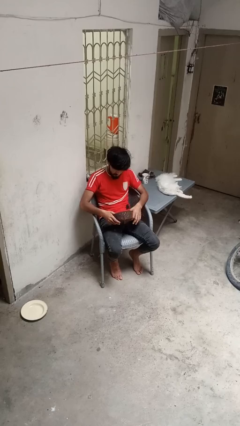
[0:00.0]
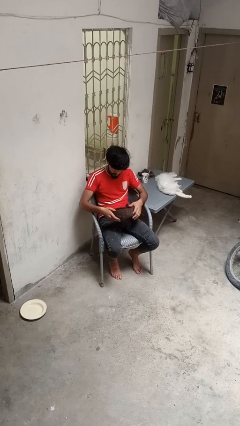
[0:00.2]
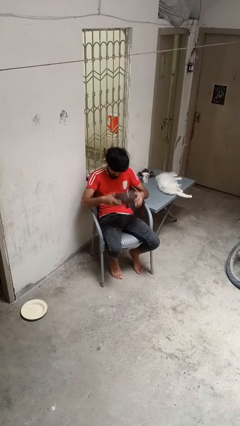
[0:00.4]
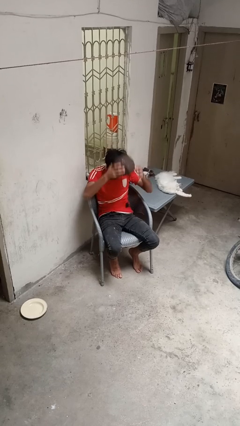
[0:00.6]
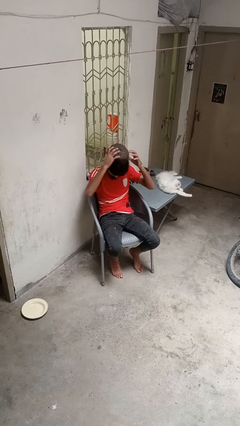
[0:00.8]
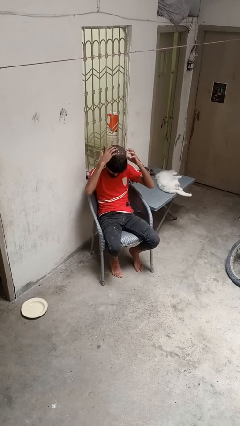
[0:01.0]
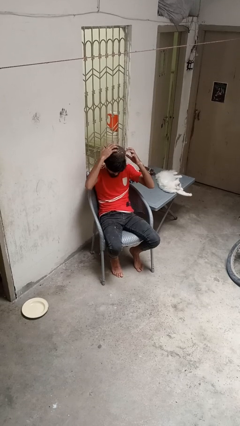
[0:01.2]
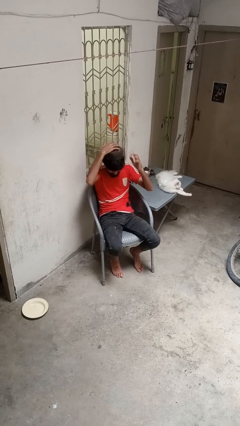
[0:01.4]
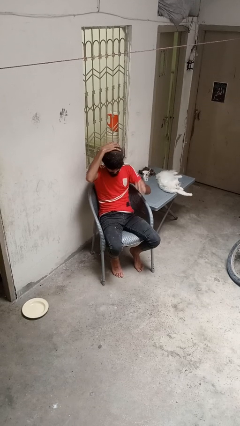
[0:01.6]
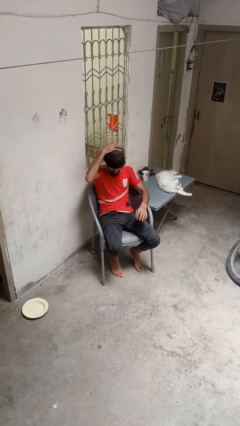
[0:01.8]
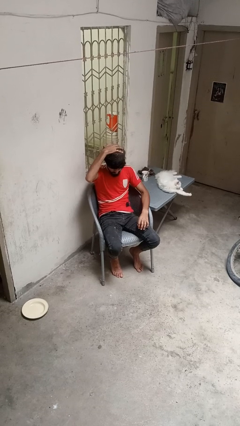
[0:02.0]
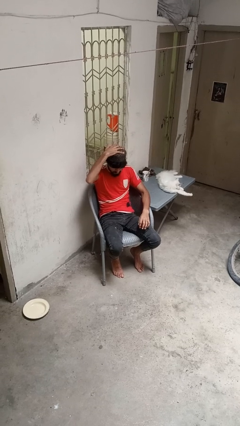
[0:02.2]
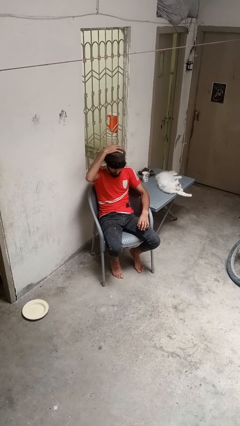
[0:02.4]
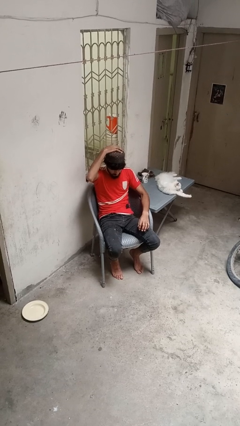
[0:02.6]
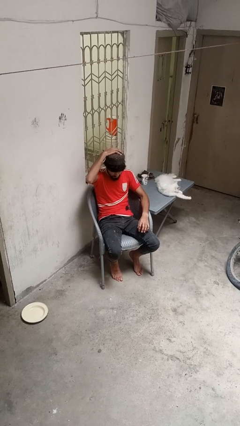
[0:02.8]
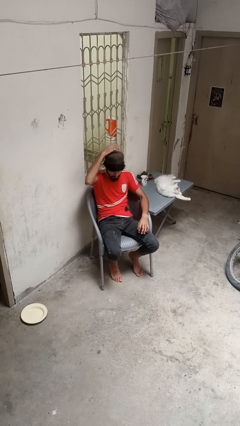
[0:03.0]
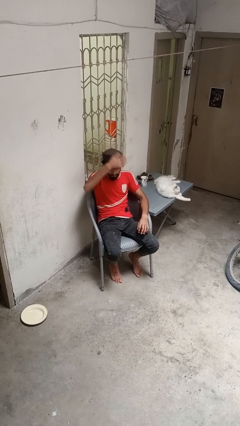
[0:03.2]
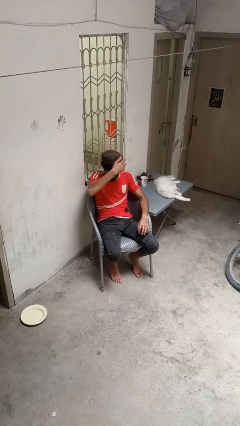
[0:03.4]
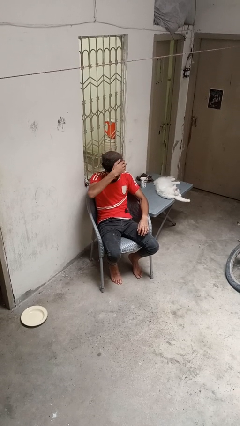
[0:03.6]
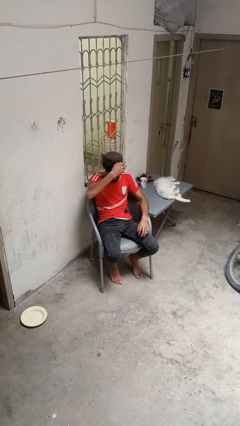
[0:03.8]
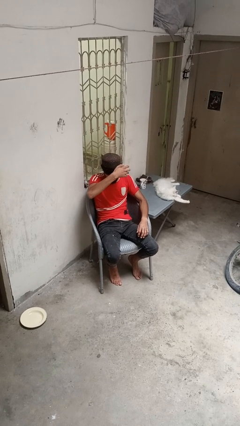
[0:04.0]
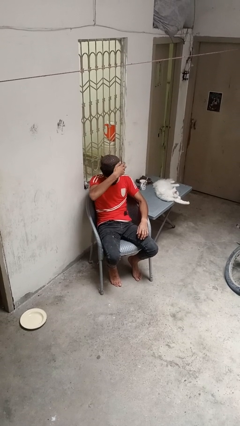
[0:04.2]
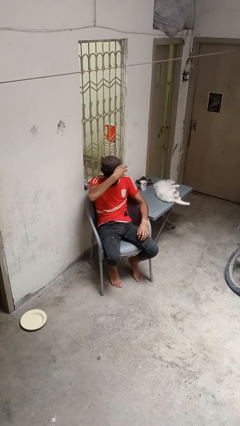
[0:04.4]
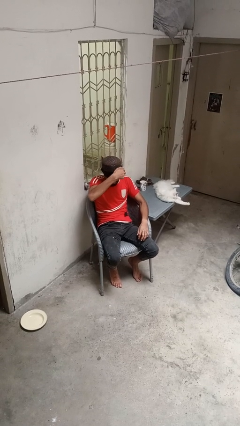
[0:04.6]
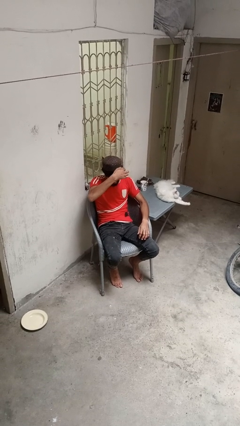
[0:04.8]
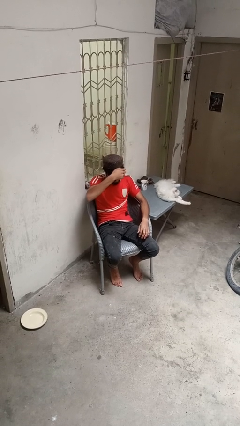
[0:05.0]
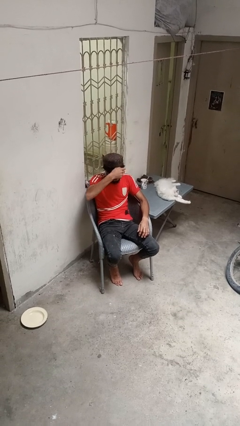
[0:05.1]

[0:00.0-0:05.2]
person puts on hat

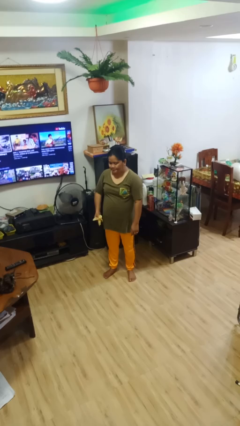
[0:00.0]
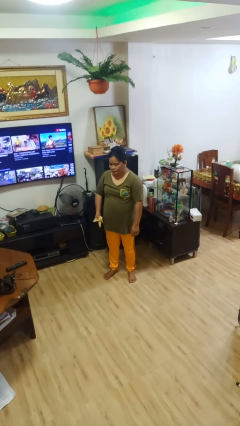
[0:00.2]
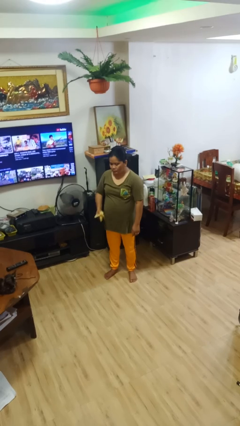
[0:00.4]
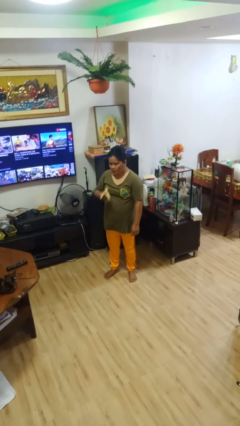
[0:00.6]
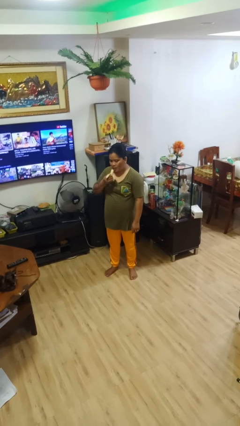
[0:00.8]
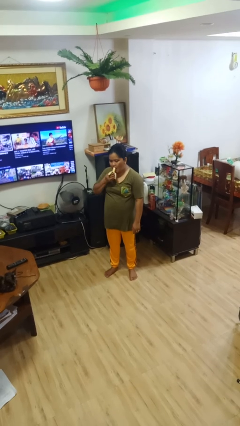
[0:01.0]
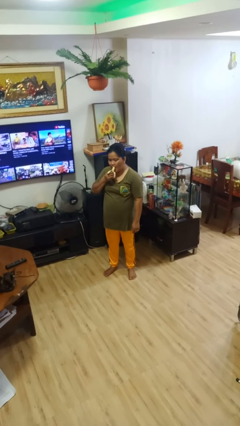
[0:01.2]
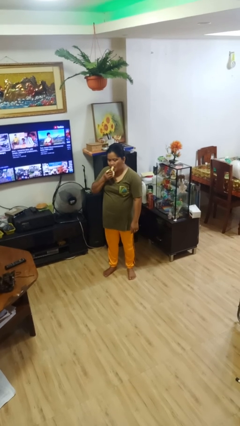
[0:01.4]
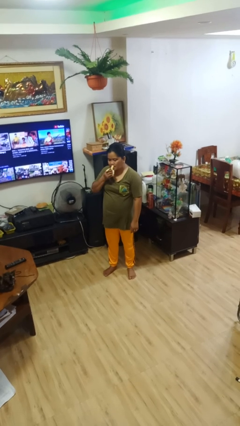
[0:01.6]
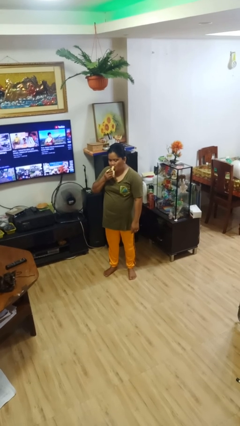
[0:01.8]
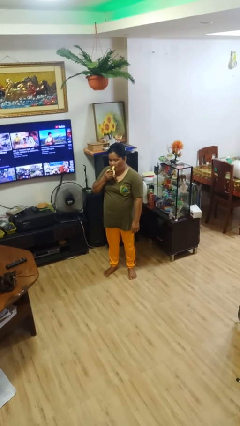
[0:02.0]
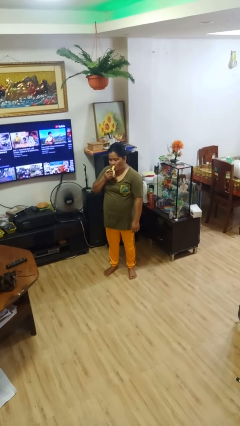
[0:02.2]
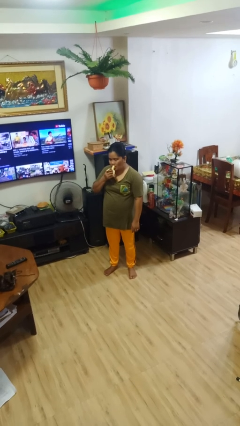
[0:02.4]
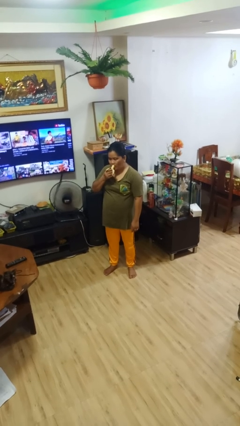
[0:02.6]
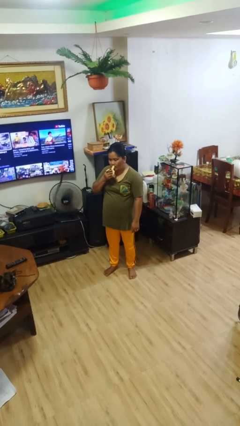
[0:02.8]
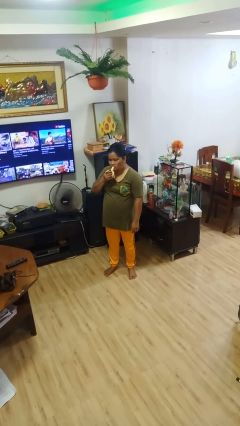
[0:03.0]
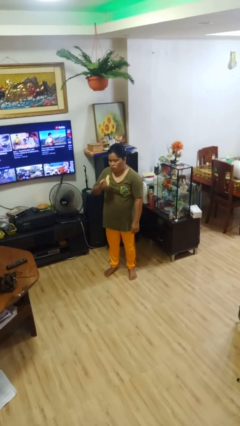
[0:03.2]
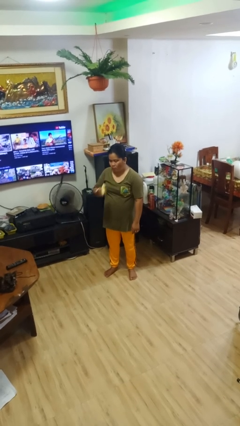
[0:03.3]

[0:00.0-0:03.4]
person eats banana

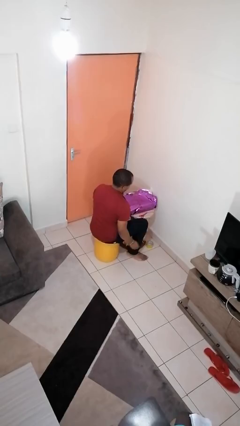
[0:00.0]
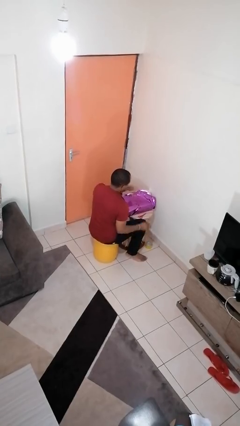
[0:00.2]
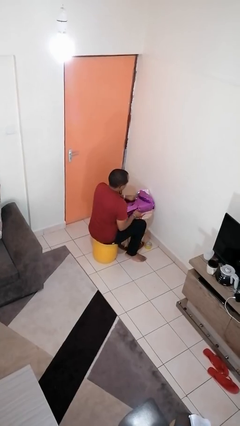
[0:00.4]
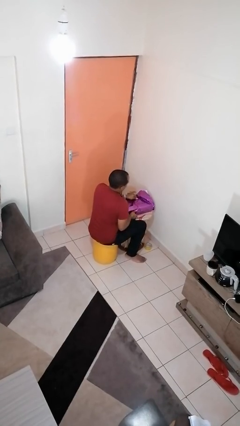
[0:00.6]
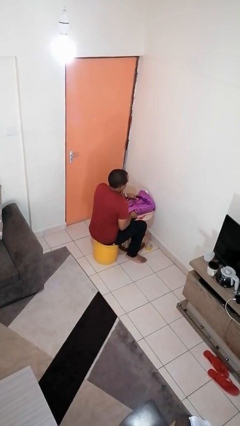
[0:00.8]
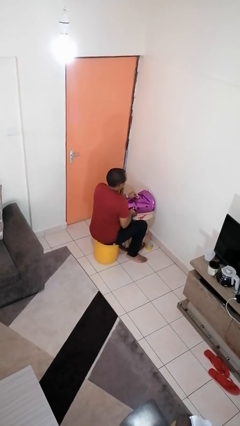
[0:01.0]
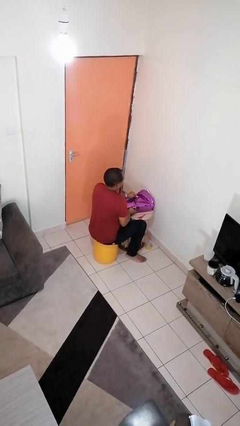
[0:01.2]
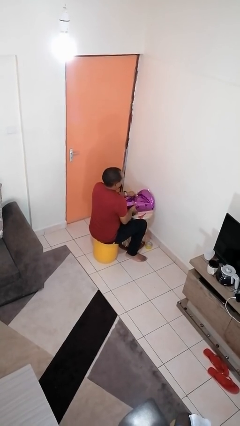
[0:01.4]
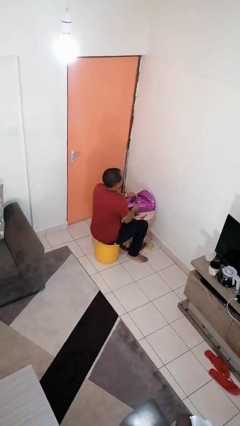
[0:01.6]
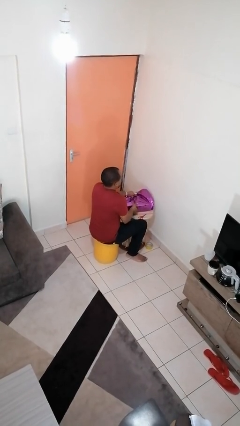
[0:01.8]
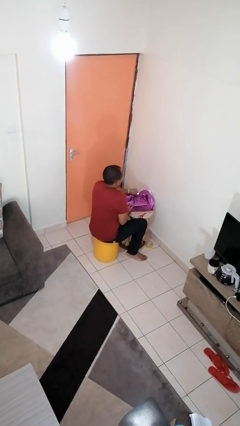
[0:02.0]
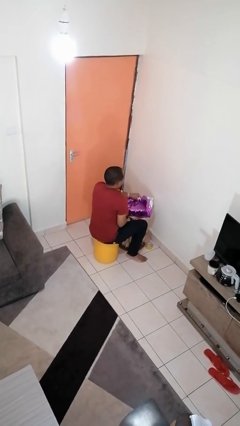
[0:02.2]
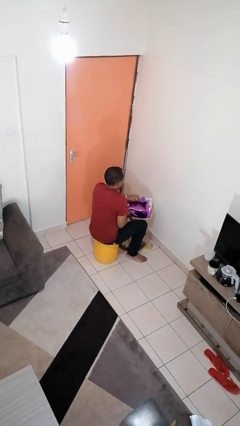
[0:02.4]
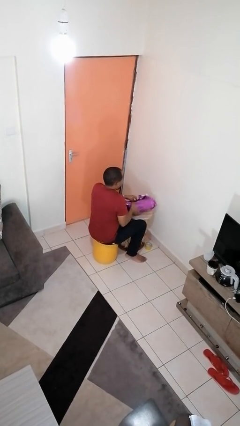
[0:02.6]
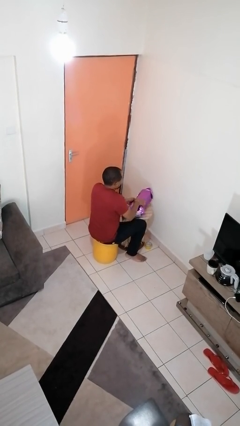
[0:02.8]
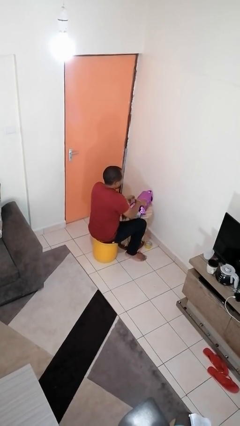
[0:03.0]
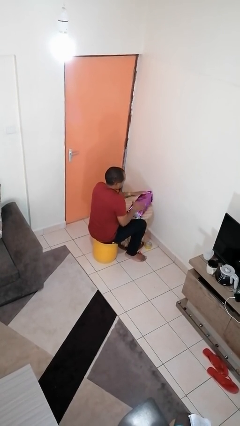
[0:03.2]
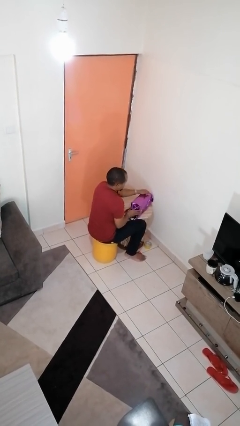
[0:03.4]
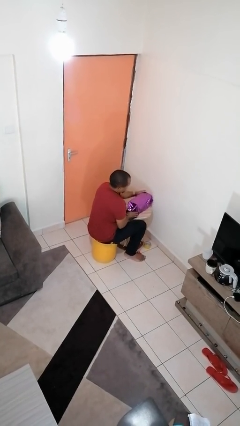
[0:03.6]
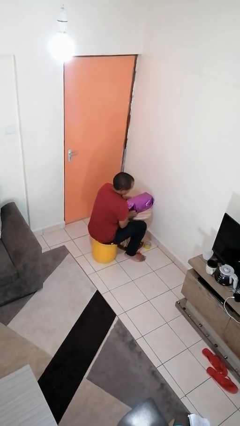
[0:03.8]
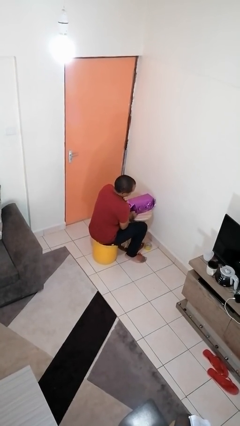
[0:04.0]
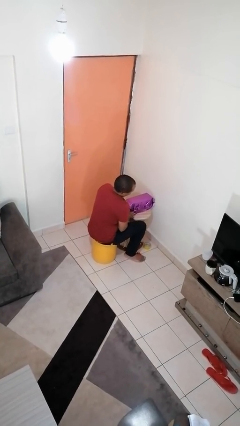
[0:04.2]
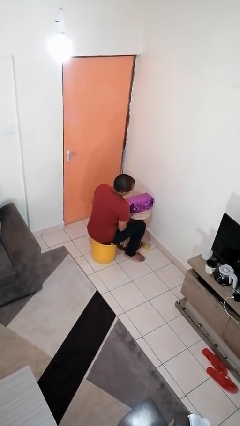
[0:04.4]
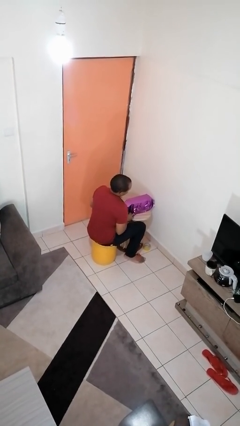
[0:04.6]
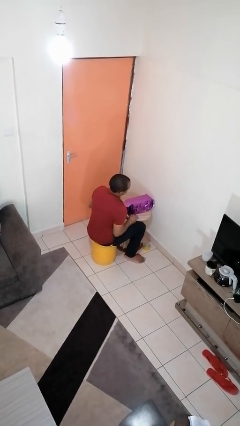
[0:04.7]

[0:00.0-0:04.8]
person wraps box

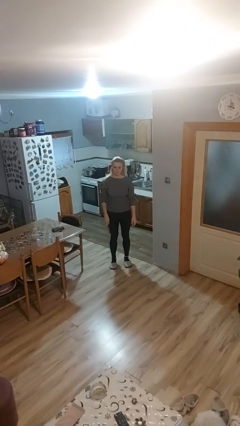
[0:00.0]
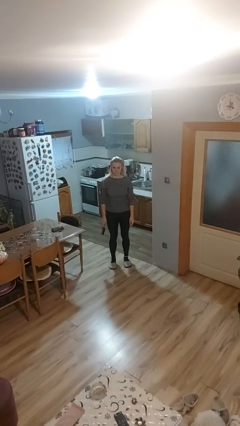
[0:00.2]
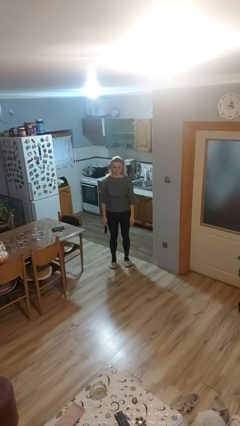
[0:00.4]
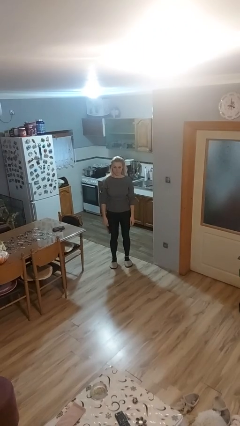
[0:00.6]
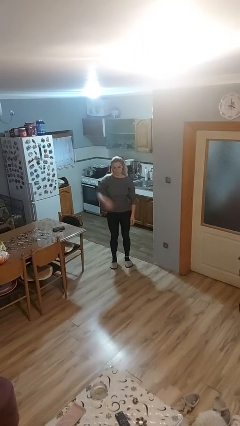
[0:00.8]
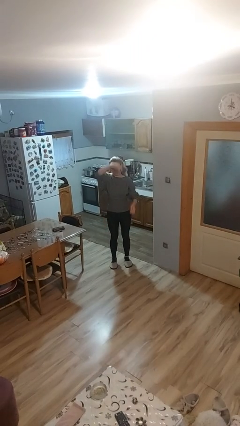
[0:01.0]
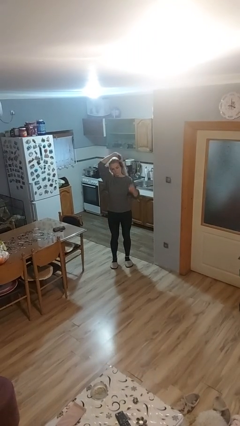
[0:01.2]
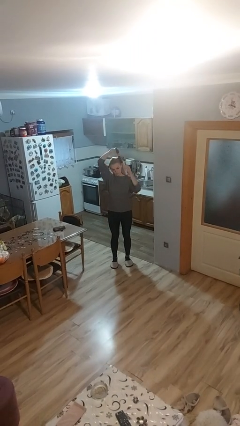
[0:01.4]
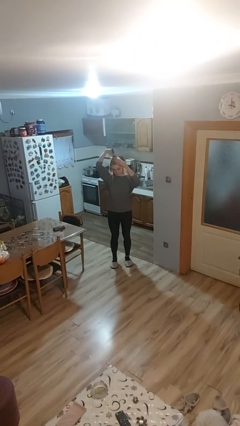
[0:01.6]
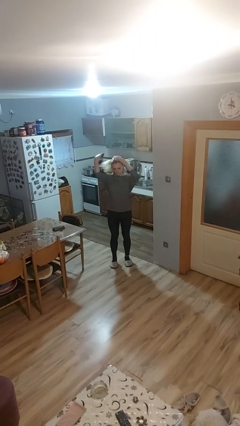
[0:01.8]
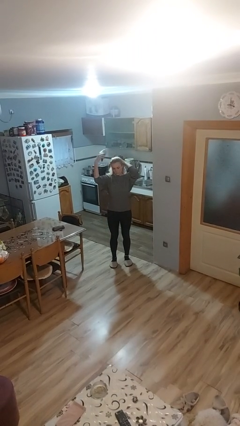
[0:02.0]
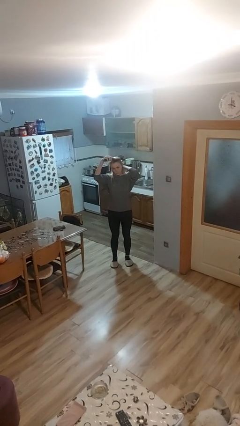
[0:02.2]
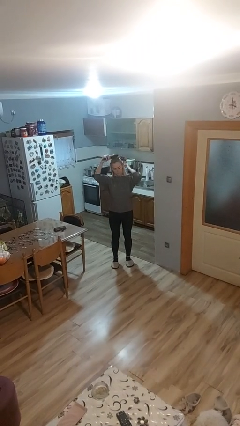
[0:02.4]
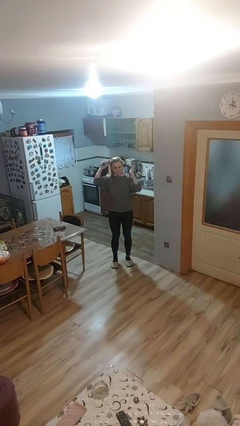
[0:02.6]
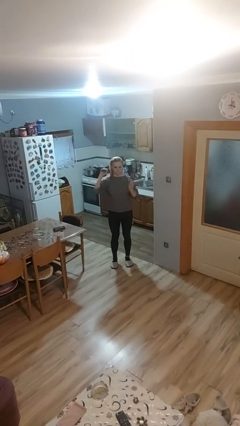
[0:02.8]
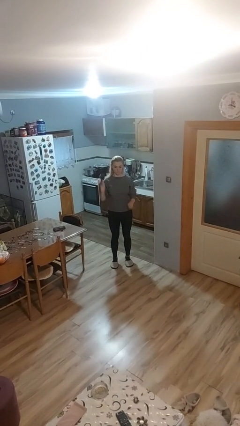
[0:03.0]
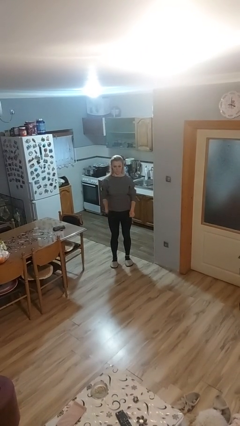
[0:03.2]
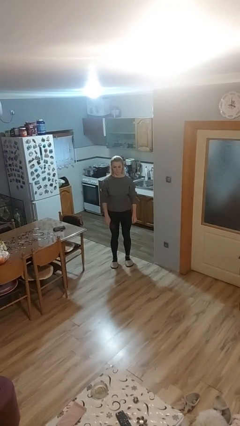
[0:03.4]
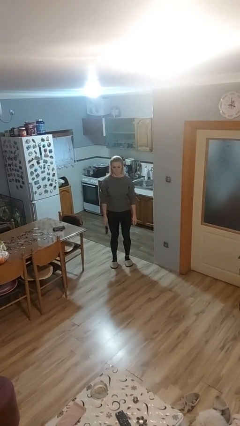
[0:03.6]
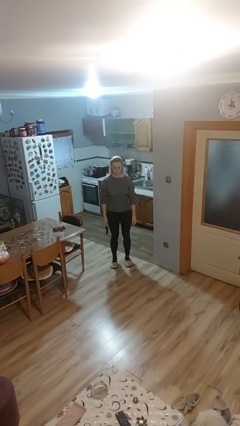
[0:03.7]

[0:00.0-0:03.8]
person brushes hair

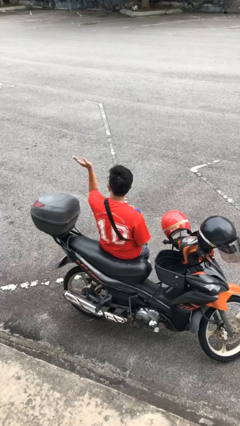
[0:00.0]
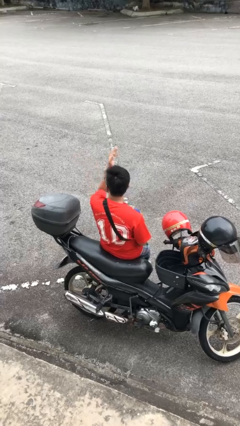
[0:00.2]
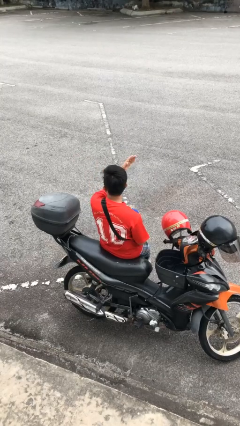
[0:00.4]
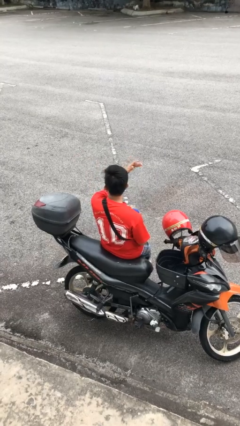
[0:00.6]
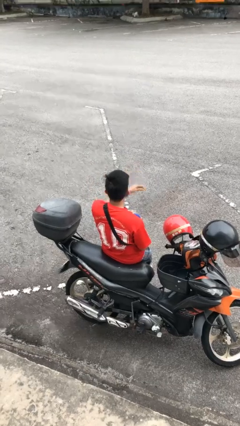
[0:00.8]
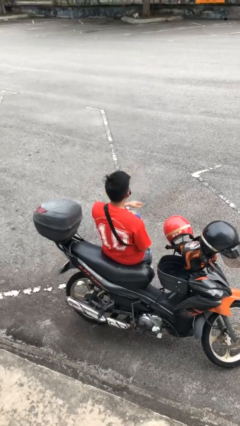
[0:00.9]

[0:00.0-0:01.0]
person gestures swipe right
